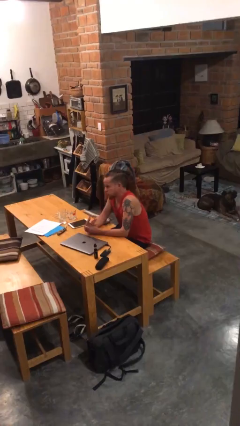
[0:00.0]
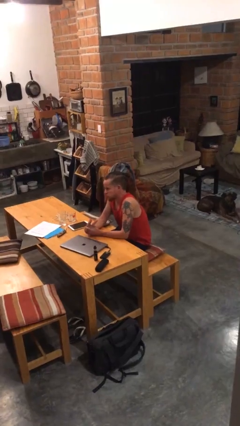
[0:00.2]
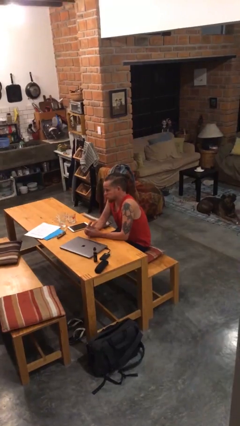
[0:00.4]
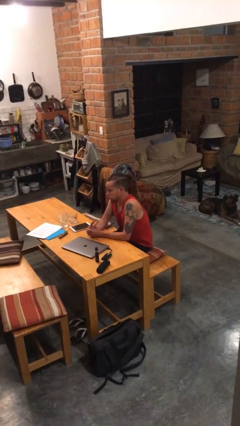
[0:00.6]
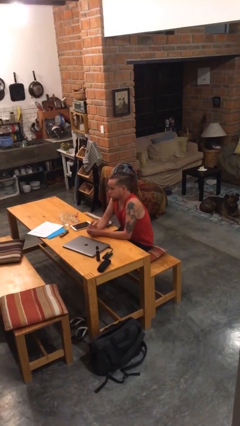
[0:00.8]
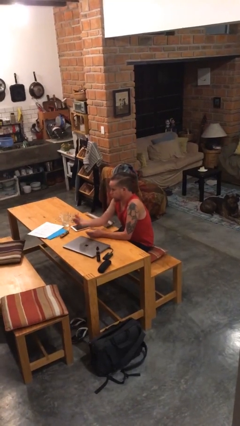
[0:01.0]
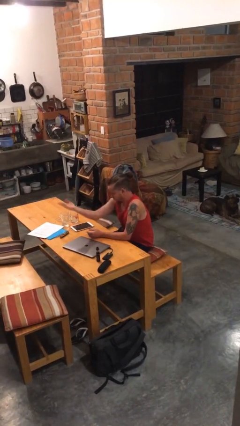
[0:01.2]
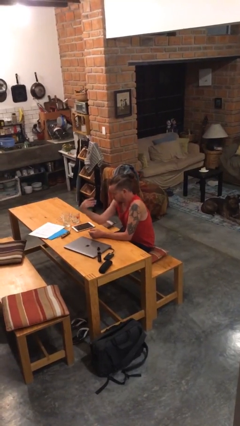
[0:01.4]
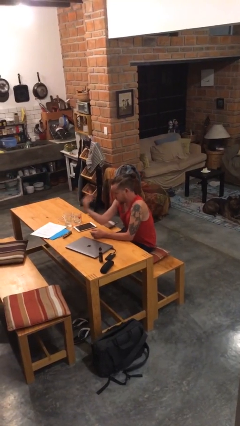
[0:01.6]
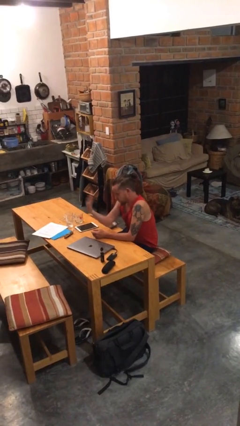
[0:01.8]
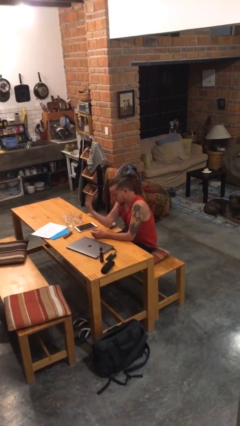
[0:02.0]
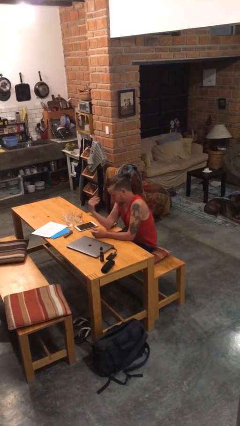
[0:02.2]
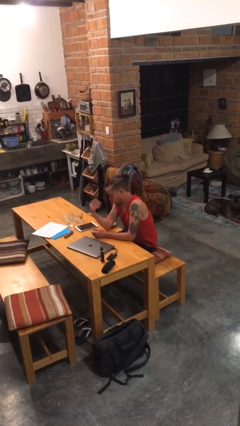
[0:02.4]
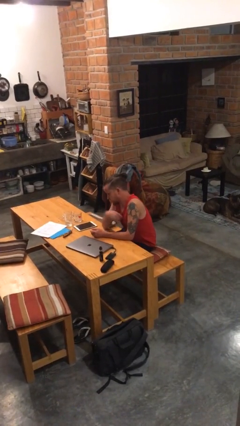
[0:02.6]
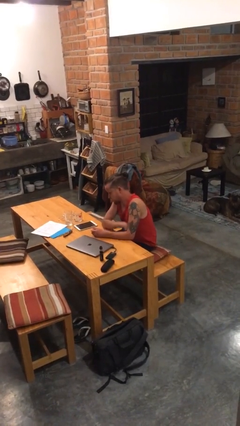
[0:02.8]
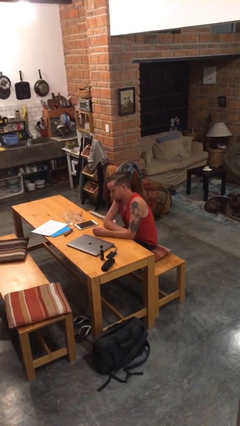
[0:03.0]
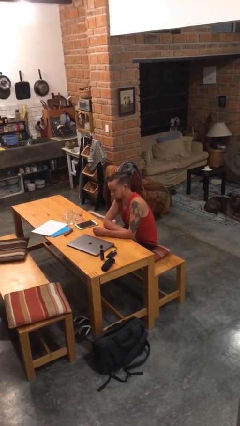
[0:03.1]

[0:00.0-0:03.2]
person gestures come here

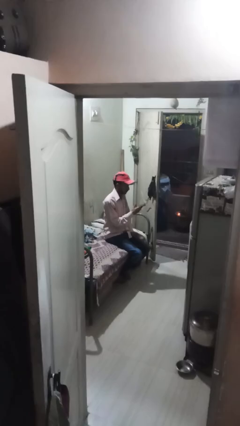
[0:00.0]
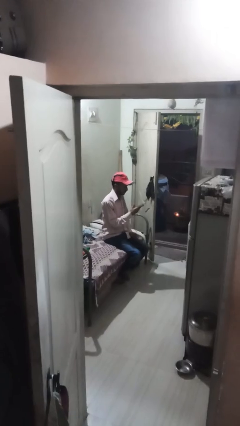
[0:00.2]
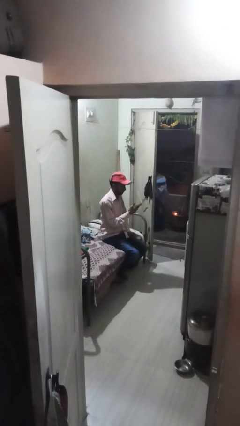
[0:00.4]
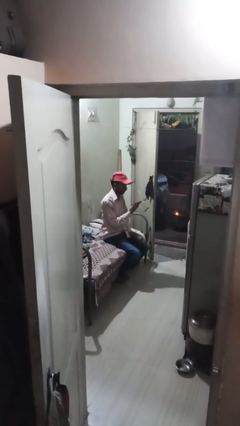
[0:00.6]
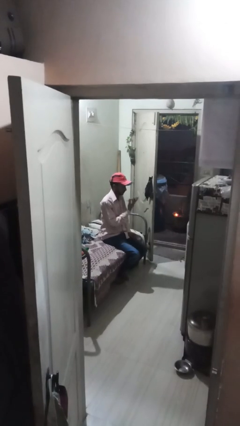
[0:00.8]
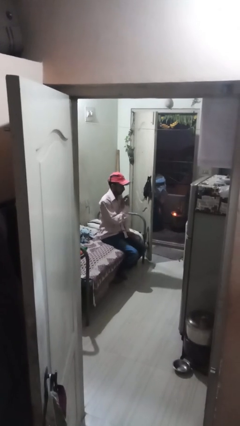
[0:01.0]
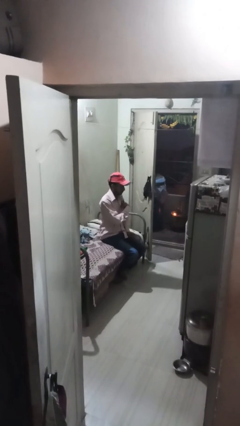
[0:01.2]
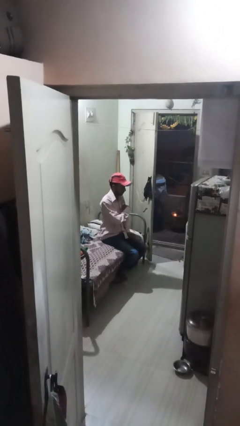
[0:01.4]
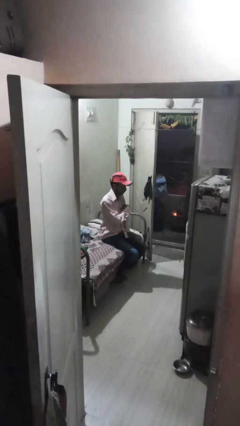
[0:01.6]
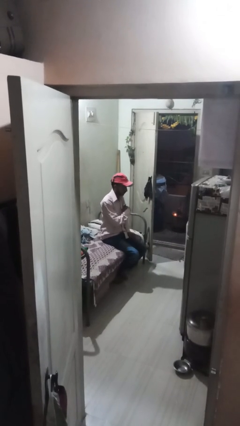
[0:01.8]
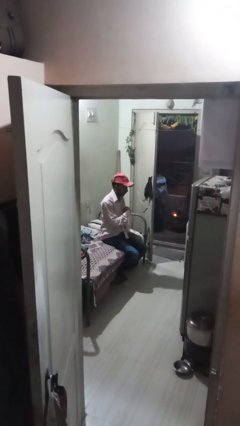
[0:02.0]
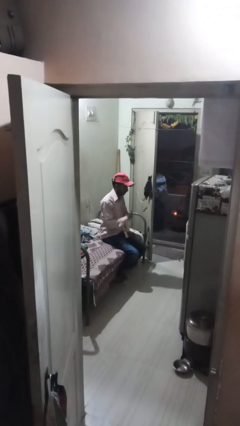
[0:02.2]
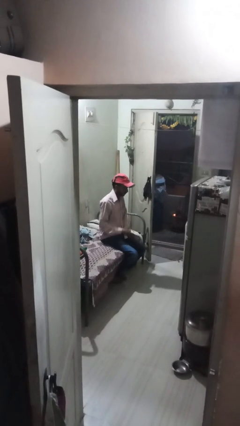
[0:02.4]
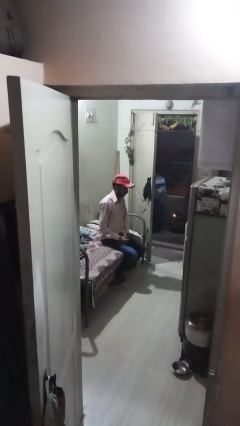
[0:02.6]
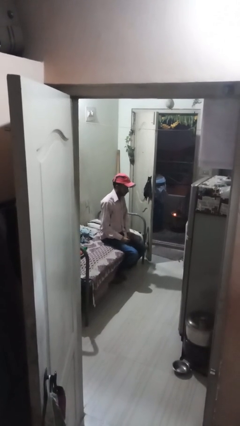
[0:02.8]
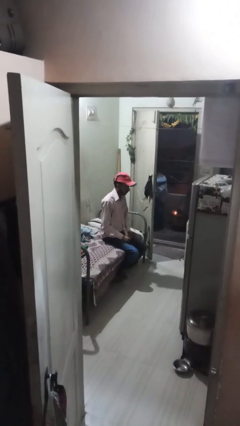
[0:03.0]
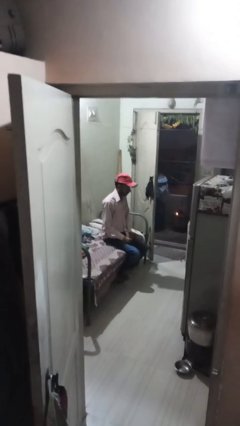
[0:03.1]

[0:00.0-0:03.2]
person puts phone into pocket

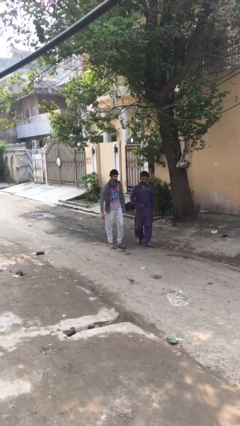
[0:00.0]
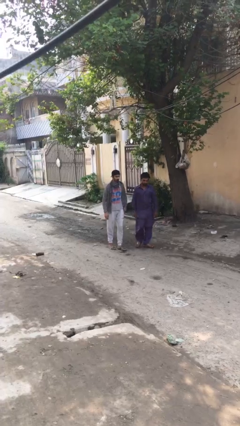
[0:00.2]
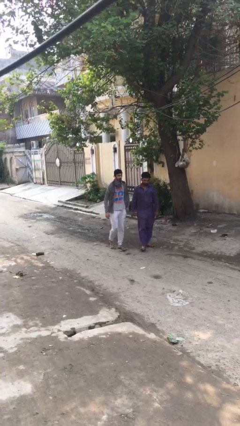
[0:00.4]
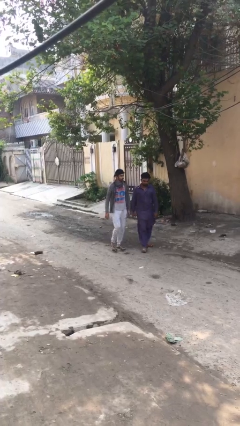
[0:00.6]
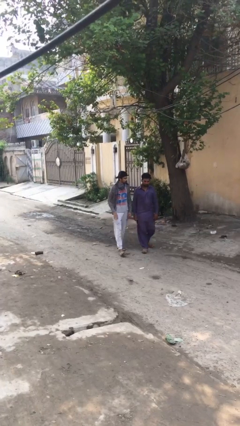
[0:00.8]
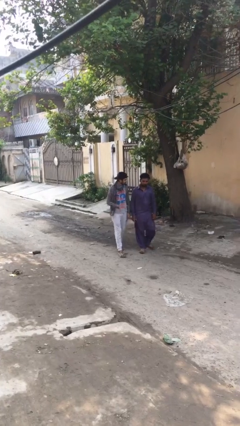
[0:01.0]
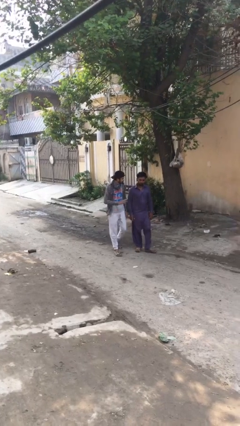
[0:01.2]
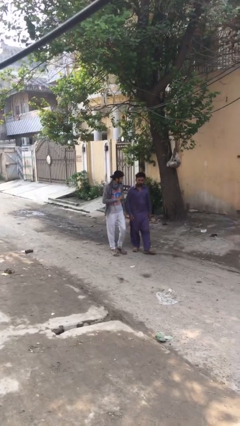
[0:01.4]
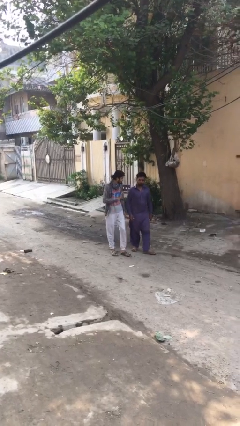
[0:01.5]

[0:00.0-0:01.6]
person talks to person

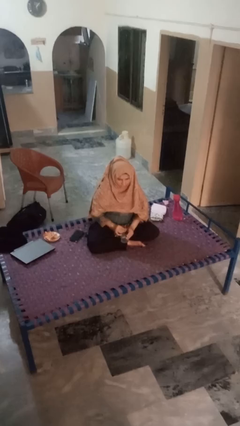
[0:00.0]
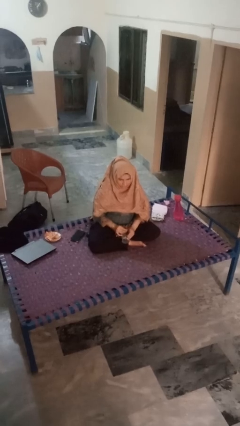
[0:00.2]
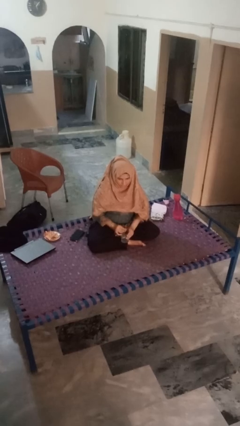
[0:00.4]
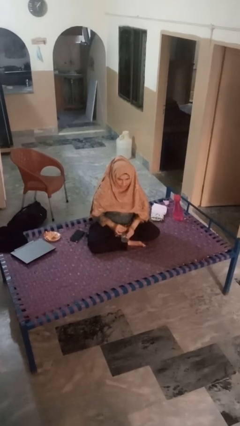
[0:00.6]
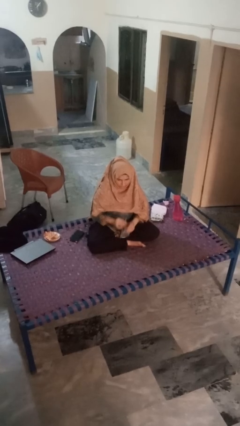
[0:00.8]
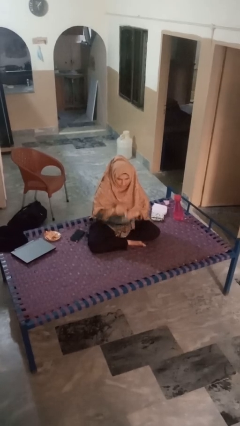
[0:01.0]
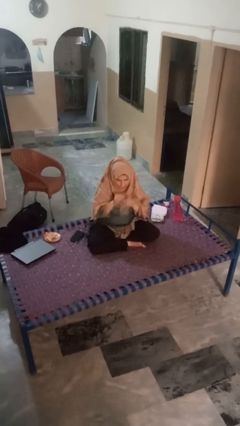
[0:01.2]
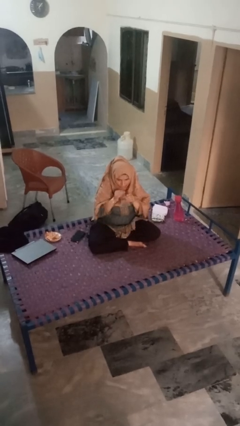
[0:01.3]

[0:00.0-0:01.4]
person drinks from straw

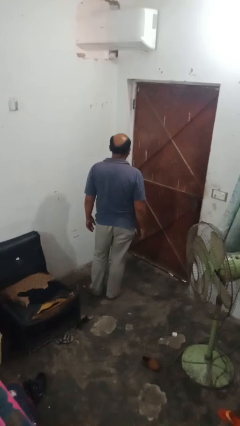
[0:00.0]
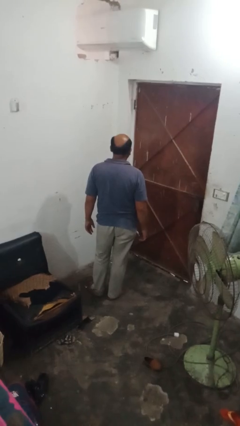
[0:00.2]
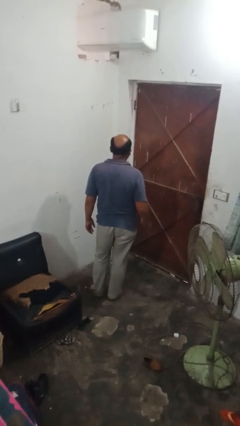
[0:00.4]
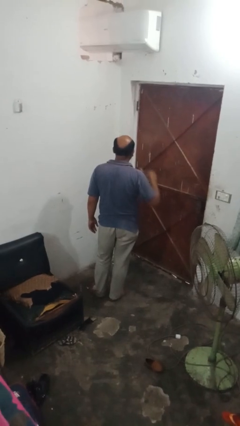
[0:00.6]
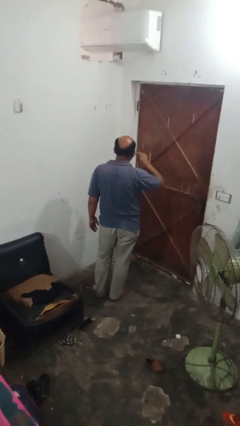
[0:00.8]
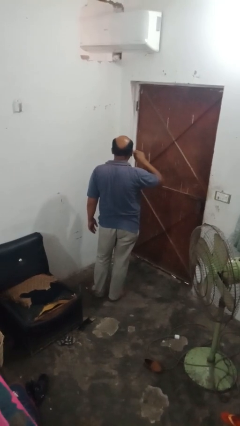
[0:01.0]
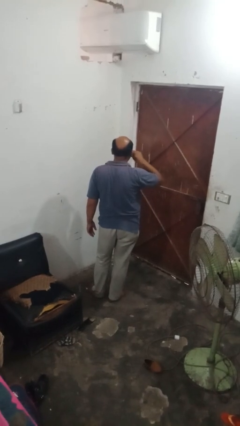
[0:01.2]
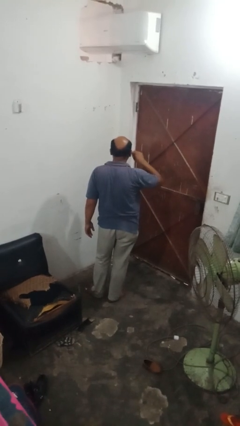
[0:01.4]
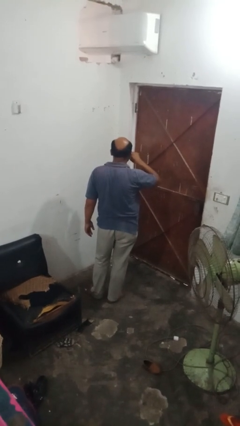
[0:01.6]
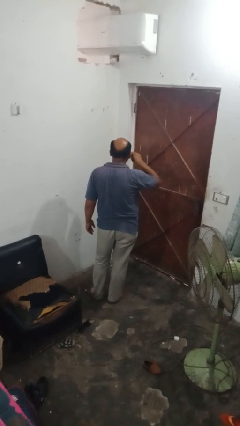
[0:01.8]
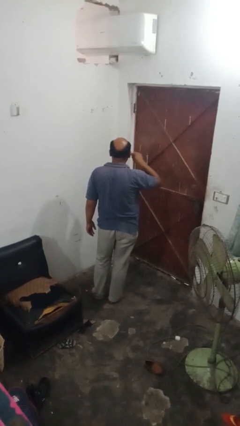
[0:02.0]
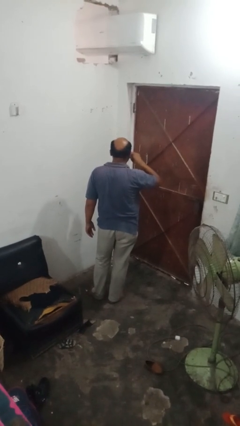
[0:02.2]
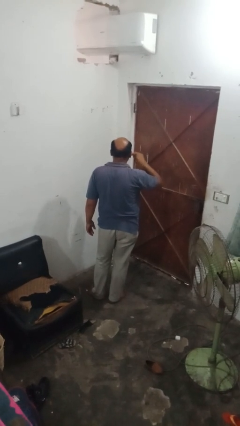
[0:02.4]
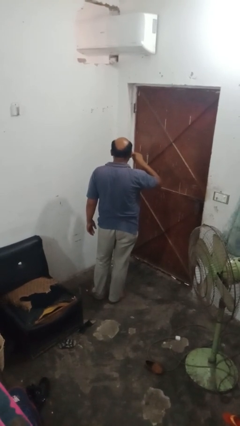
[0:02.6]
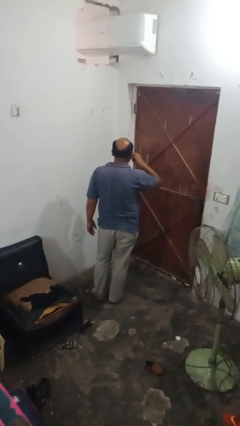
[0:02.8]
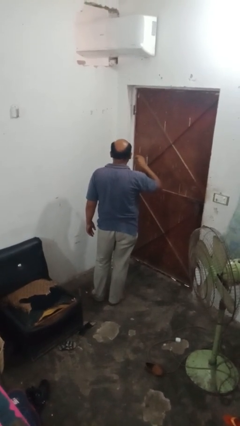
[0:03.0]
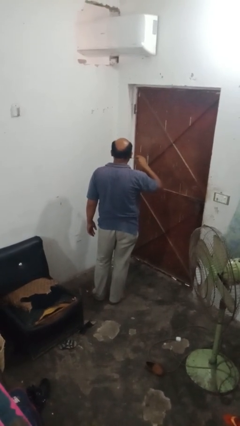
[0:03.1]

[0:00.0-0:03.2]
person brushes teeth

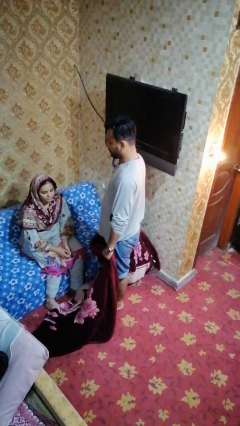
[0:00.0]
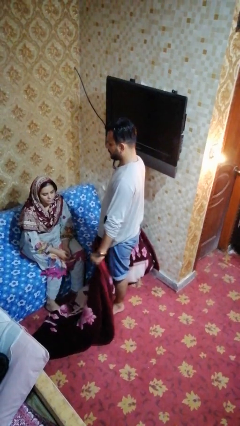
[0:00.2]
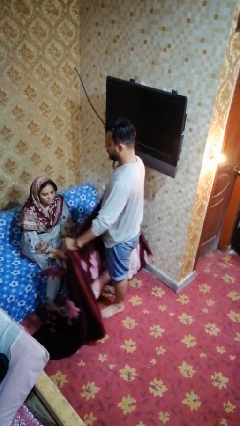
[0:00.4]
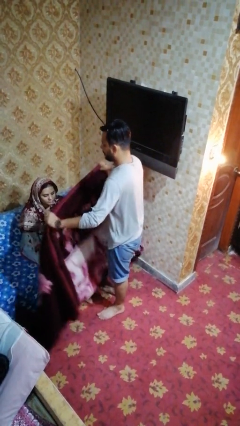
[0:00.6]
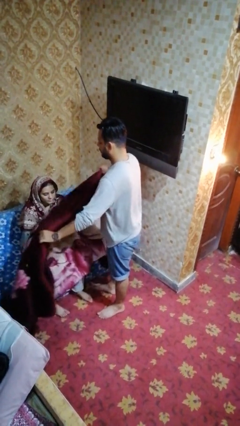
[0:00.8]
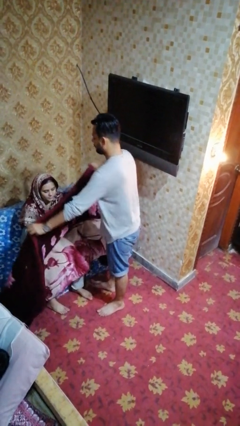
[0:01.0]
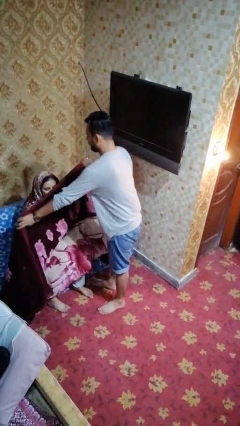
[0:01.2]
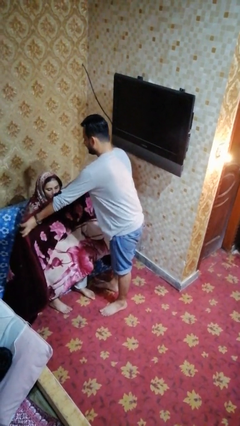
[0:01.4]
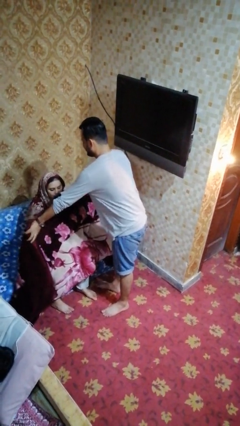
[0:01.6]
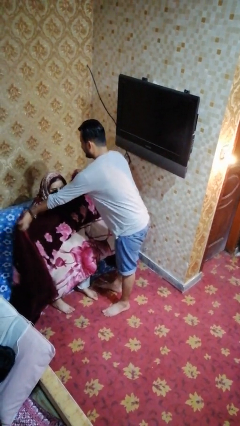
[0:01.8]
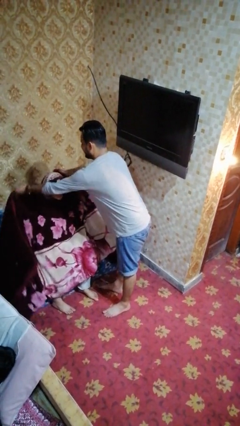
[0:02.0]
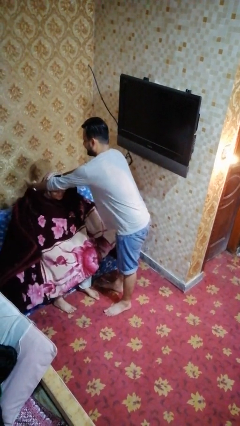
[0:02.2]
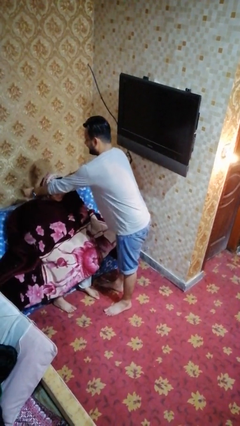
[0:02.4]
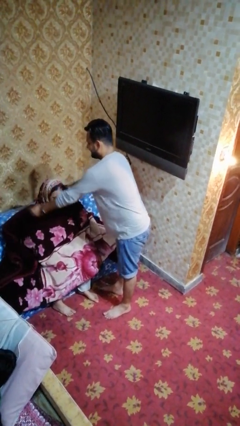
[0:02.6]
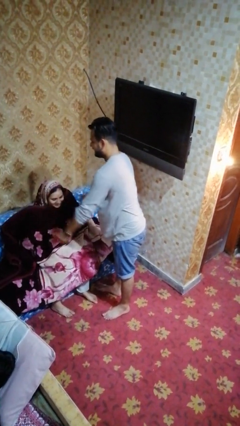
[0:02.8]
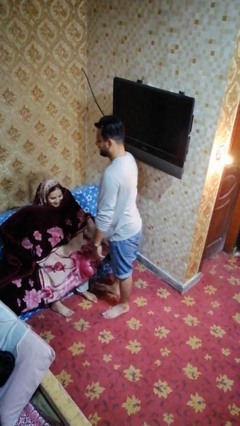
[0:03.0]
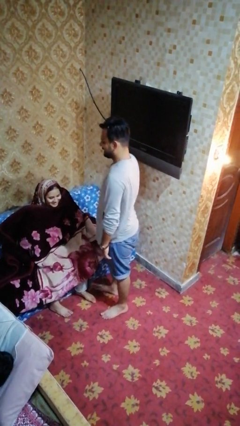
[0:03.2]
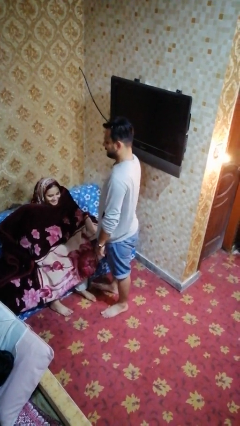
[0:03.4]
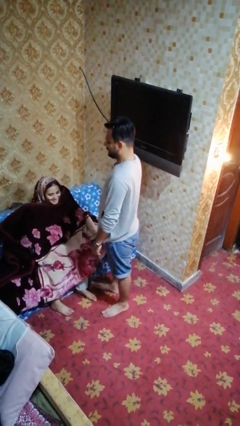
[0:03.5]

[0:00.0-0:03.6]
person covers friend with blanket

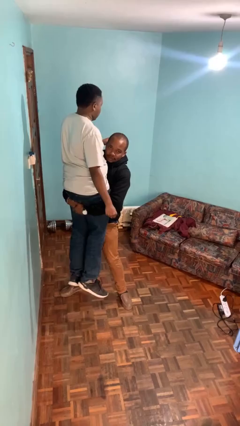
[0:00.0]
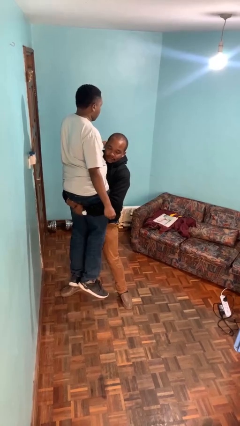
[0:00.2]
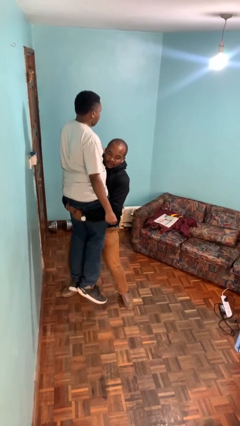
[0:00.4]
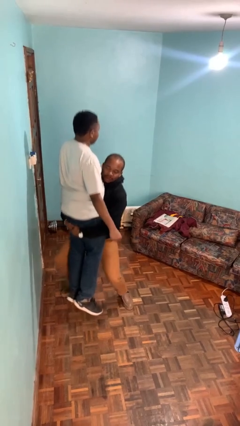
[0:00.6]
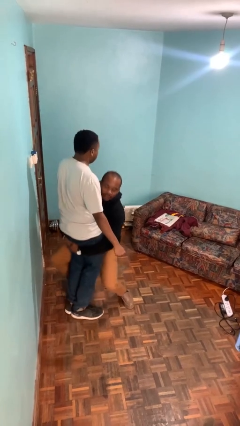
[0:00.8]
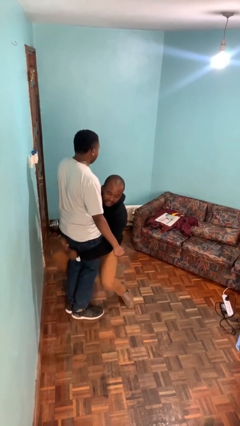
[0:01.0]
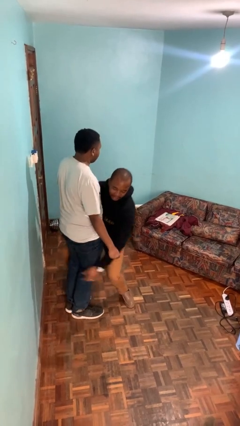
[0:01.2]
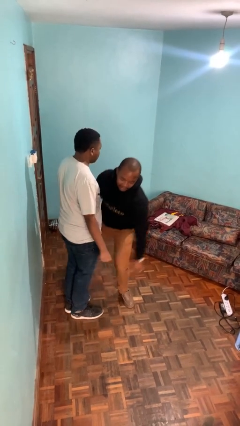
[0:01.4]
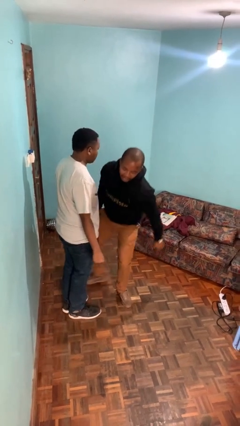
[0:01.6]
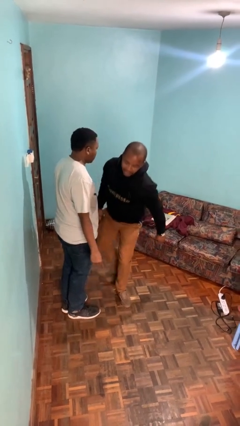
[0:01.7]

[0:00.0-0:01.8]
person puts down person
